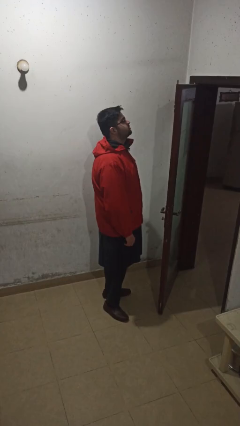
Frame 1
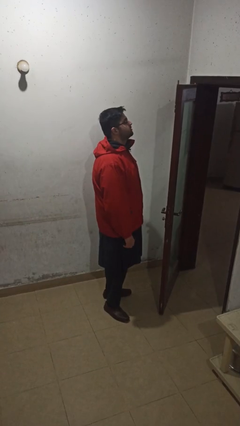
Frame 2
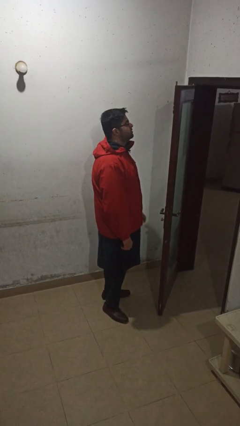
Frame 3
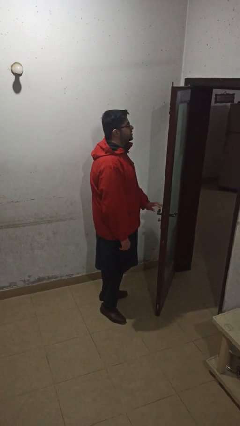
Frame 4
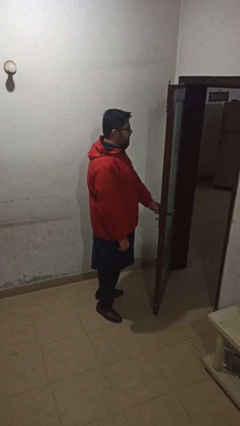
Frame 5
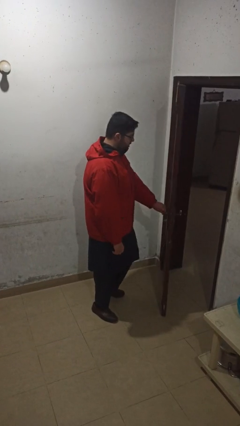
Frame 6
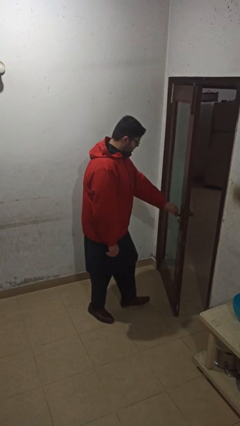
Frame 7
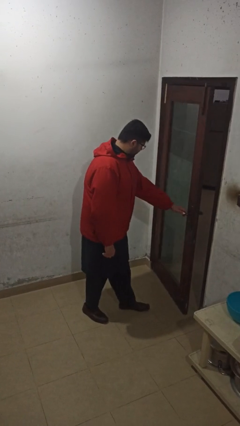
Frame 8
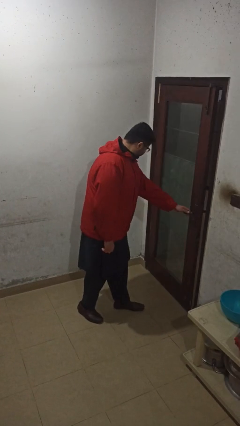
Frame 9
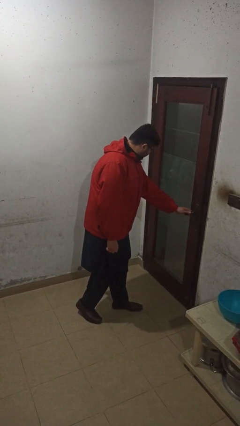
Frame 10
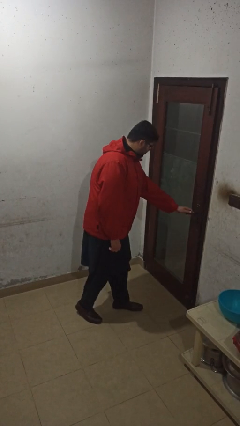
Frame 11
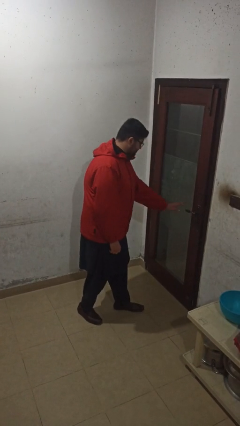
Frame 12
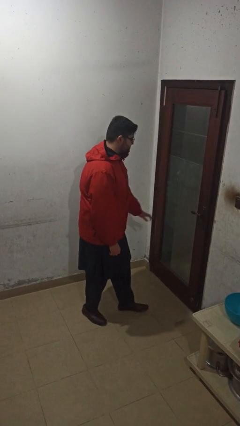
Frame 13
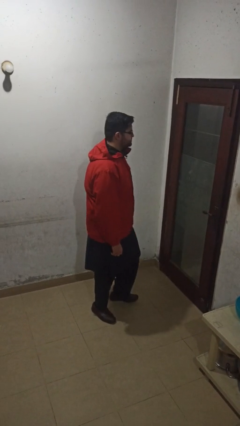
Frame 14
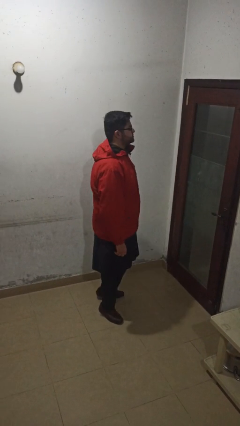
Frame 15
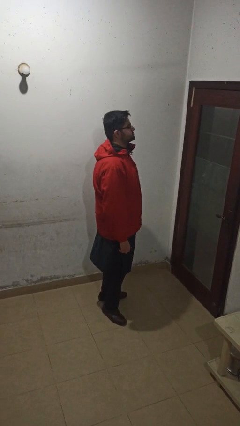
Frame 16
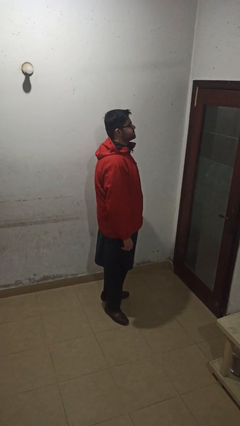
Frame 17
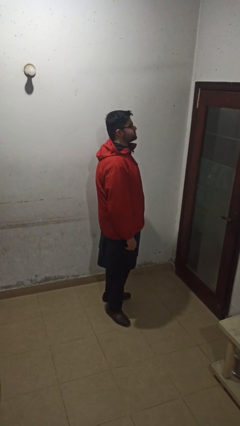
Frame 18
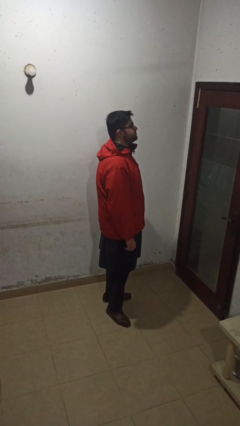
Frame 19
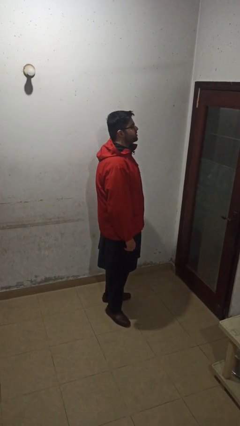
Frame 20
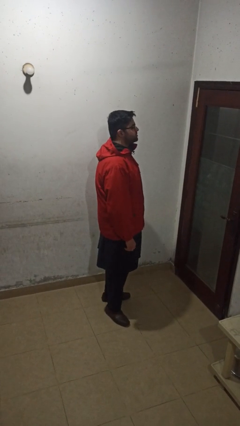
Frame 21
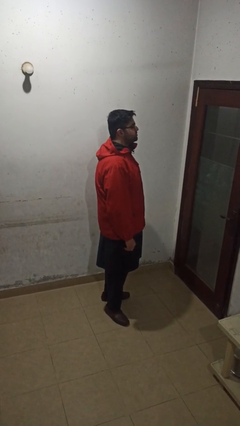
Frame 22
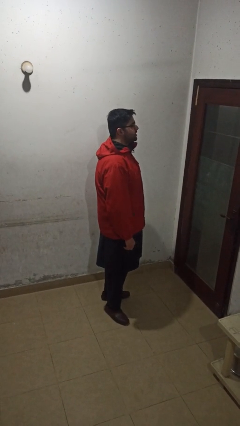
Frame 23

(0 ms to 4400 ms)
person closes facility door

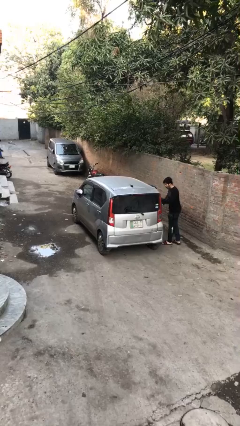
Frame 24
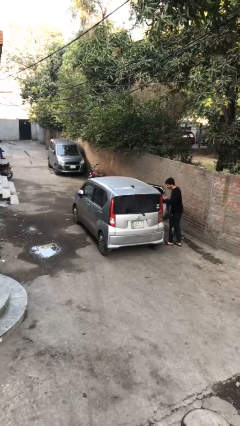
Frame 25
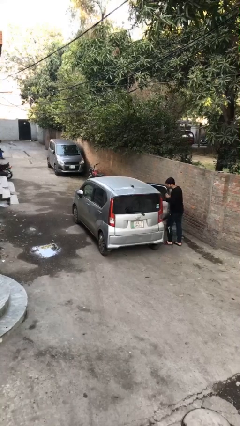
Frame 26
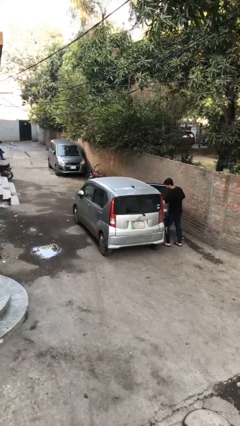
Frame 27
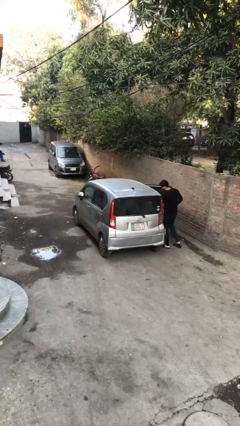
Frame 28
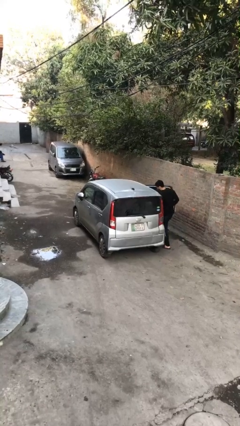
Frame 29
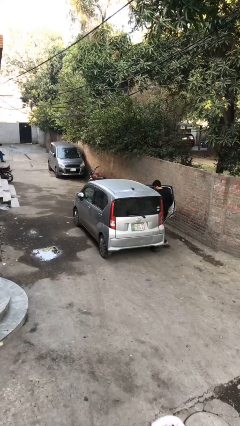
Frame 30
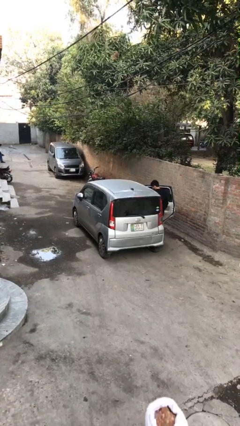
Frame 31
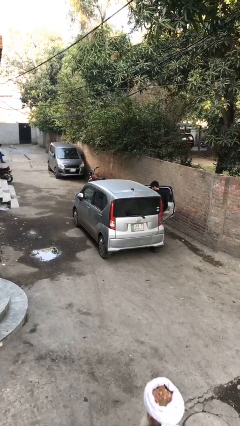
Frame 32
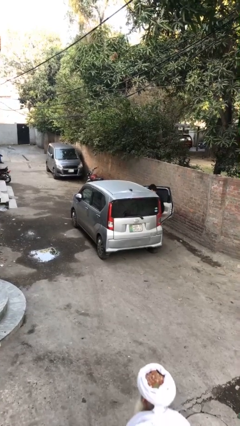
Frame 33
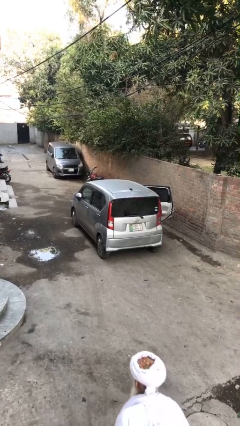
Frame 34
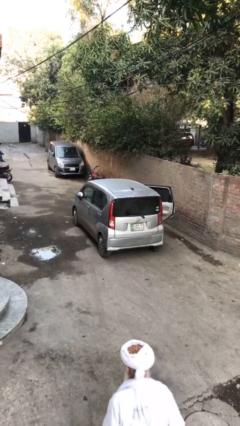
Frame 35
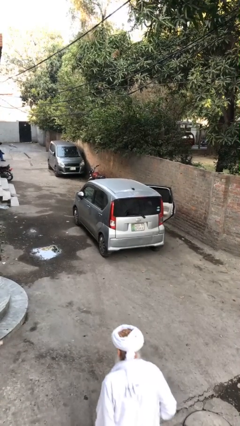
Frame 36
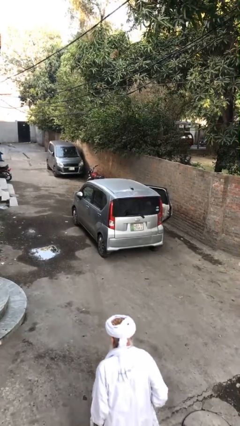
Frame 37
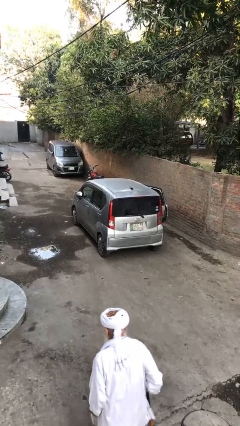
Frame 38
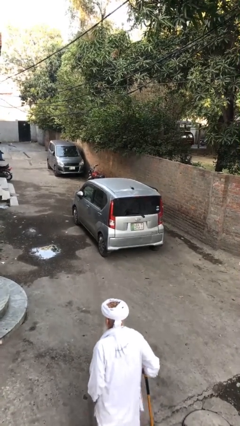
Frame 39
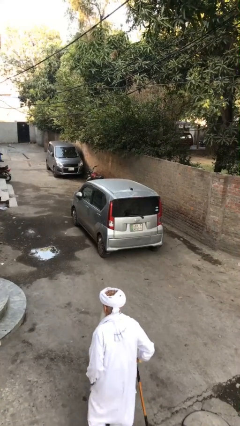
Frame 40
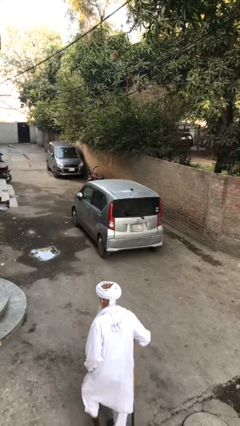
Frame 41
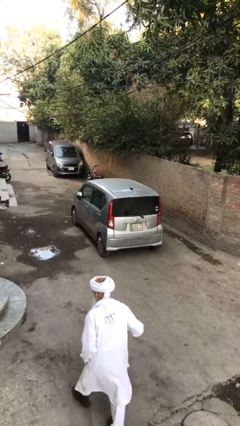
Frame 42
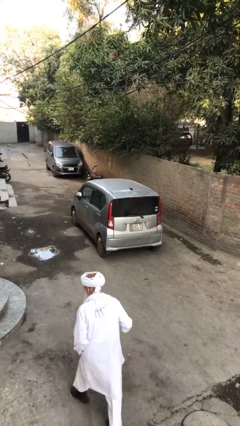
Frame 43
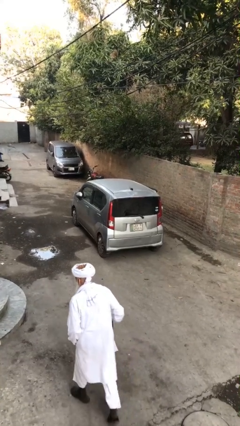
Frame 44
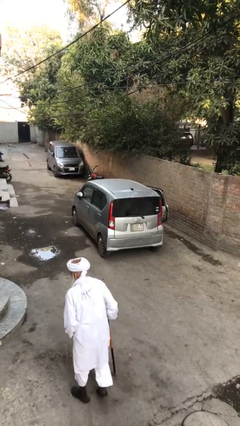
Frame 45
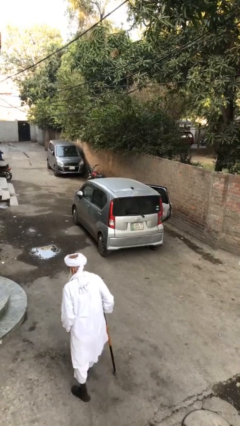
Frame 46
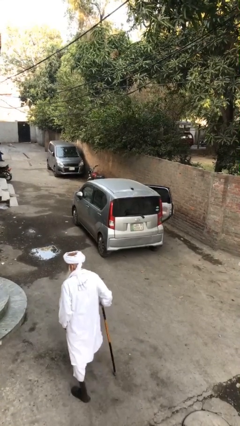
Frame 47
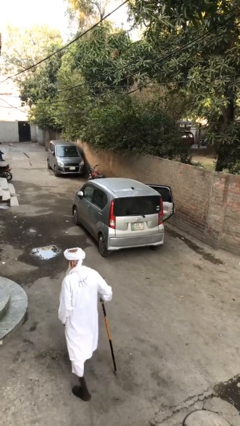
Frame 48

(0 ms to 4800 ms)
car picks up person

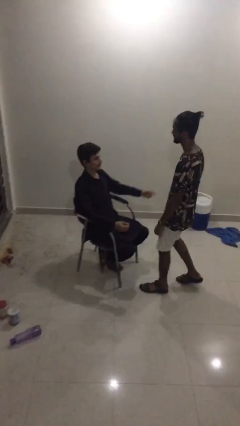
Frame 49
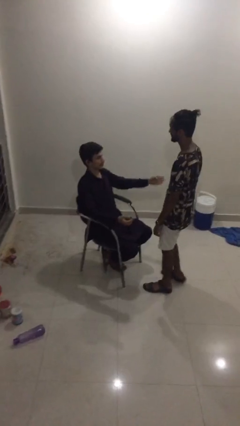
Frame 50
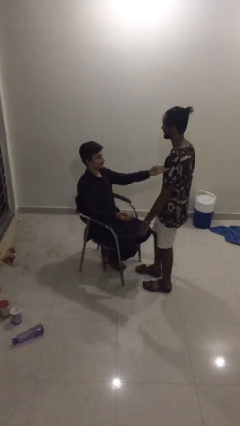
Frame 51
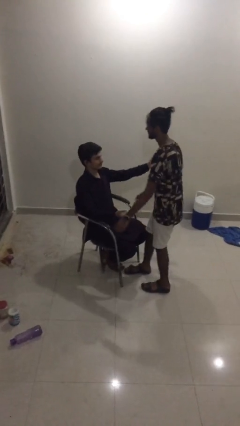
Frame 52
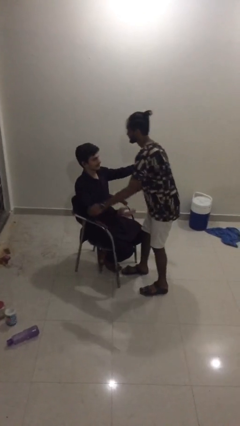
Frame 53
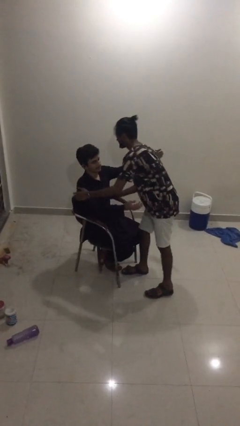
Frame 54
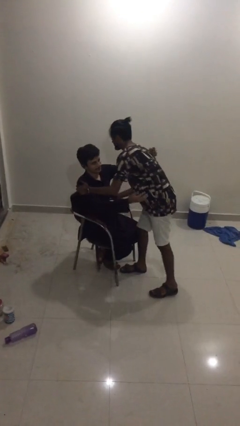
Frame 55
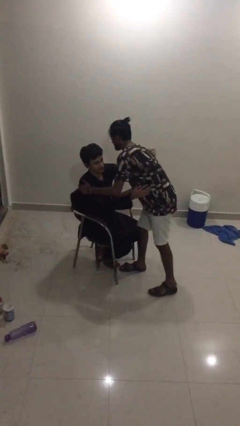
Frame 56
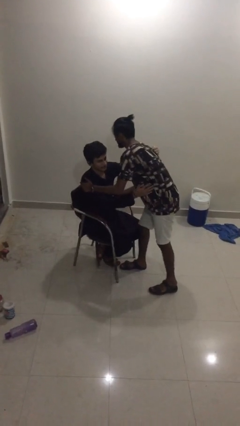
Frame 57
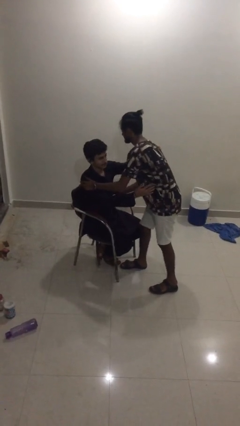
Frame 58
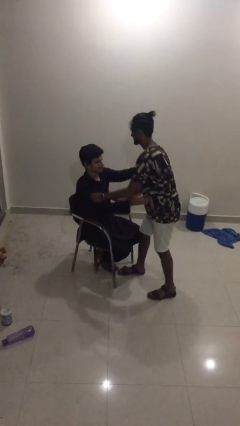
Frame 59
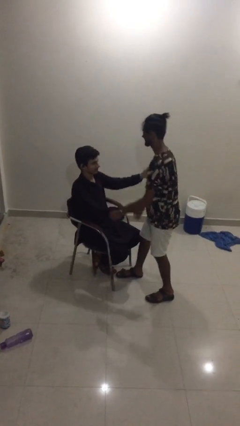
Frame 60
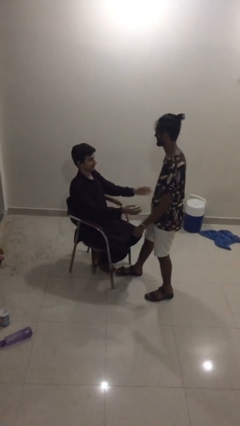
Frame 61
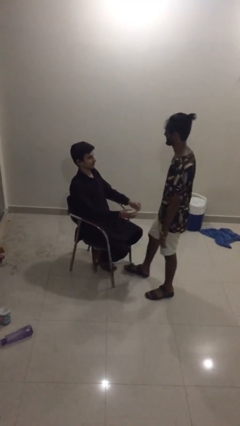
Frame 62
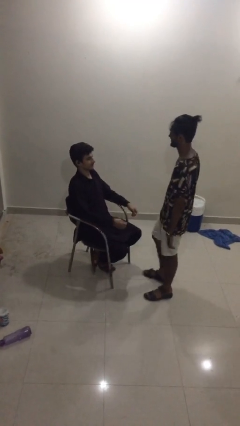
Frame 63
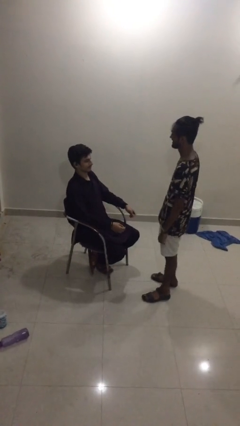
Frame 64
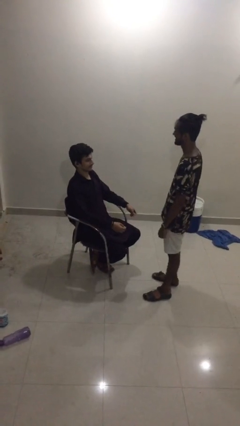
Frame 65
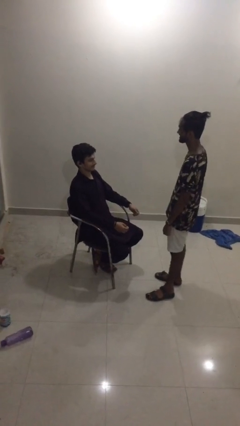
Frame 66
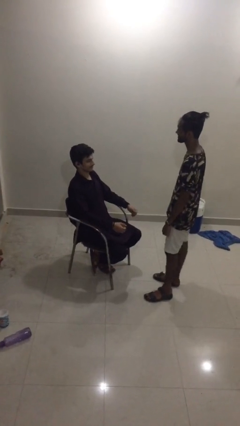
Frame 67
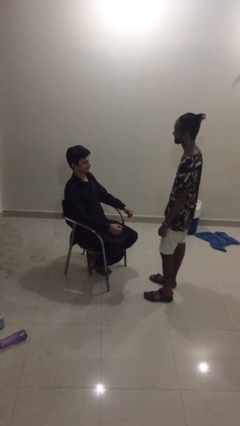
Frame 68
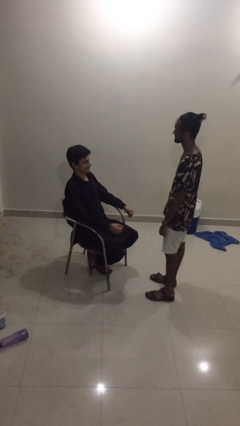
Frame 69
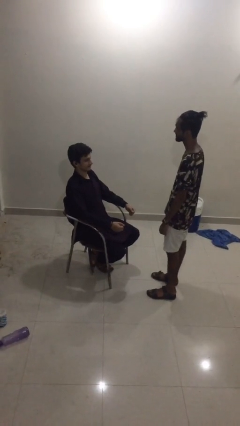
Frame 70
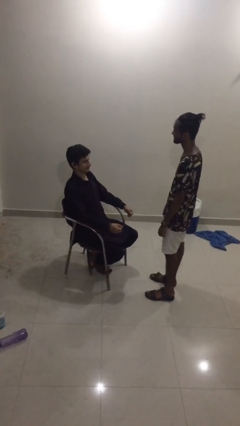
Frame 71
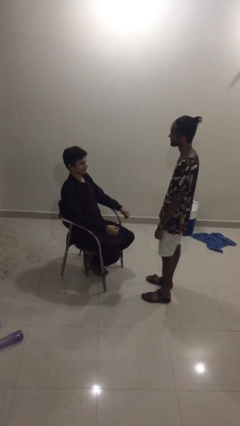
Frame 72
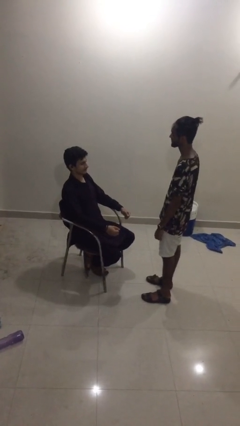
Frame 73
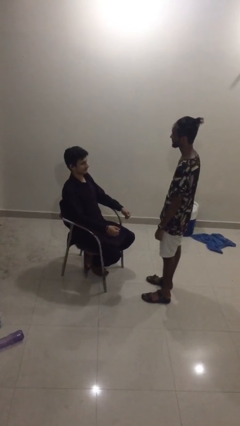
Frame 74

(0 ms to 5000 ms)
person embraces person

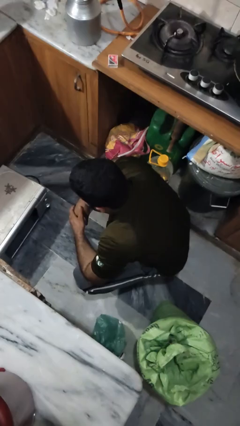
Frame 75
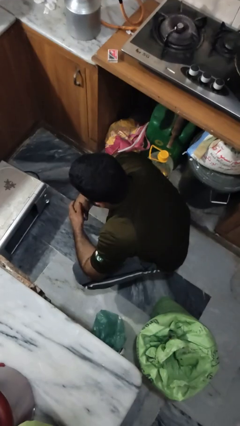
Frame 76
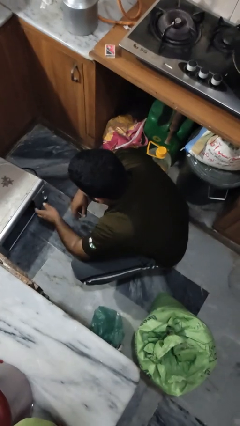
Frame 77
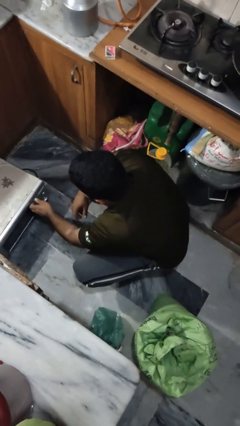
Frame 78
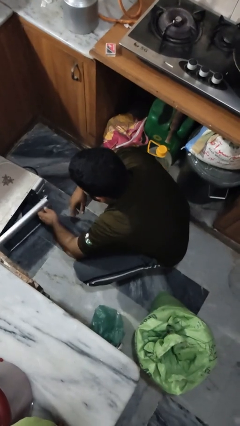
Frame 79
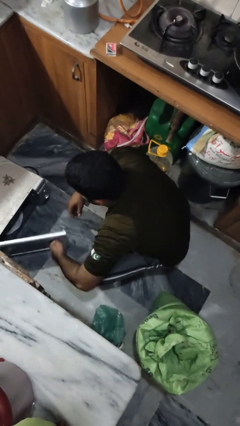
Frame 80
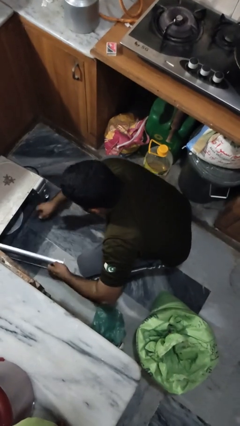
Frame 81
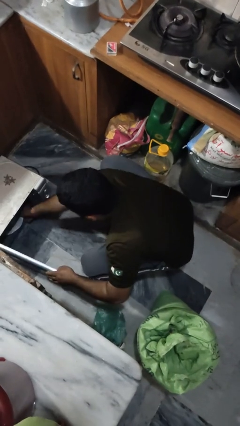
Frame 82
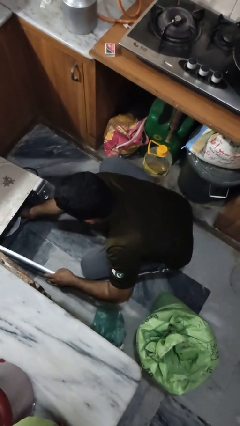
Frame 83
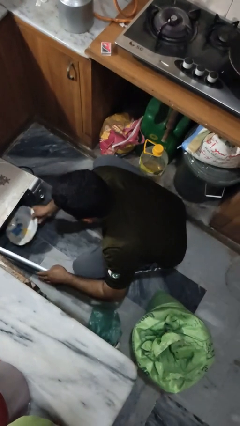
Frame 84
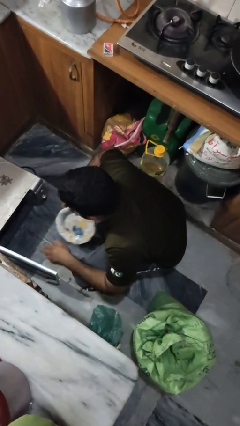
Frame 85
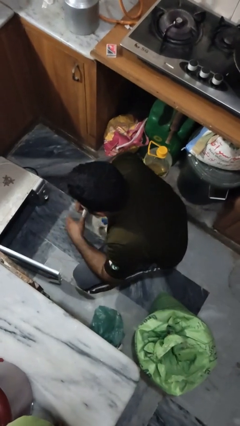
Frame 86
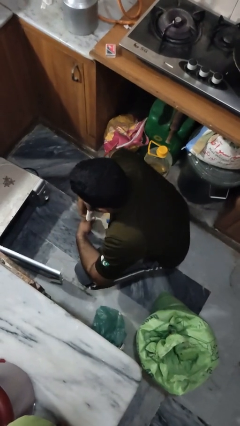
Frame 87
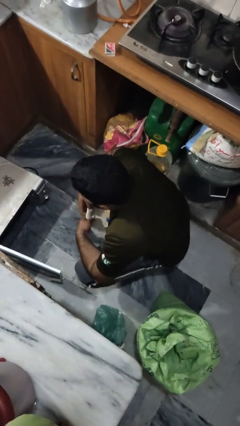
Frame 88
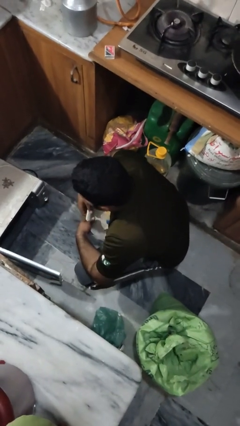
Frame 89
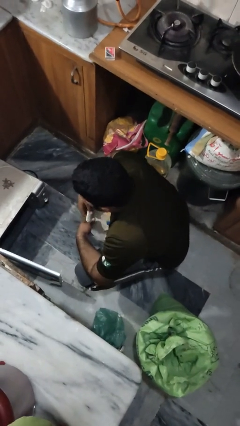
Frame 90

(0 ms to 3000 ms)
person takes object from oven

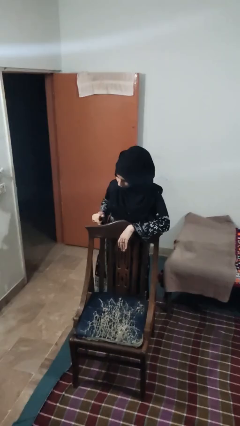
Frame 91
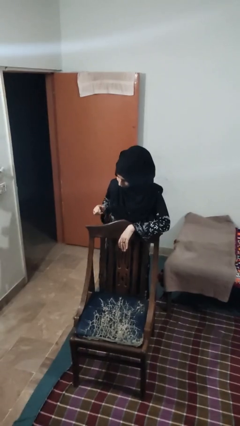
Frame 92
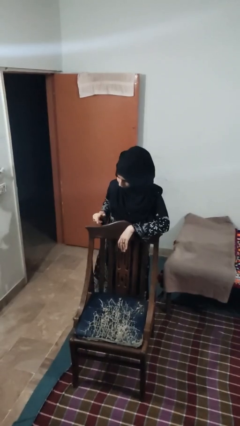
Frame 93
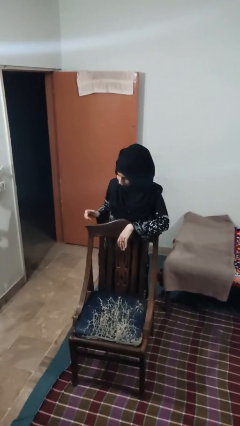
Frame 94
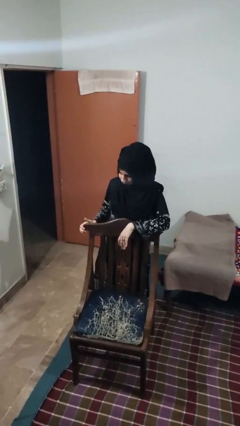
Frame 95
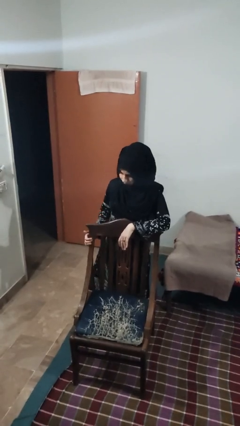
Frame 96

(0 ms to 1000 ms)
person taps object with finger
